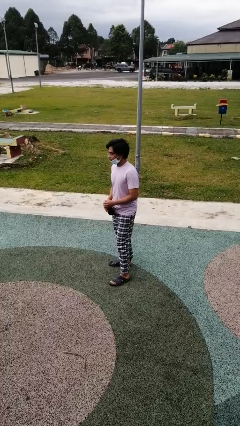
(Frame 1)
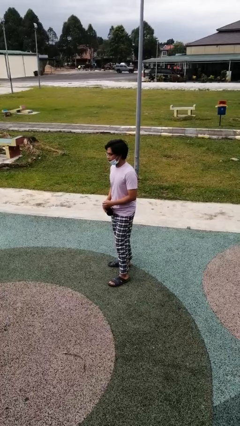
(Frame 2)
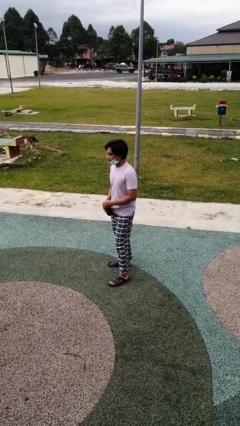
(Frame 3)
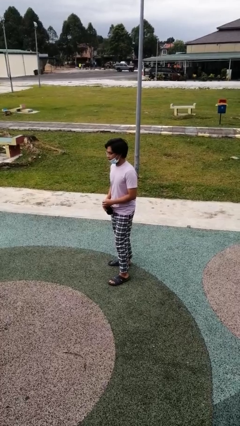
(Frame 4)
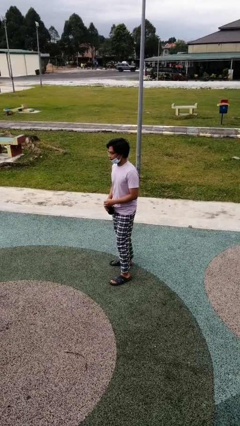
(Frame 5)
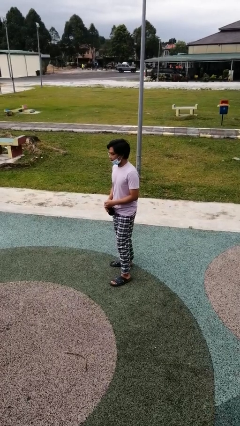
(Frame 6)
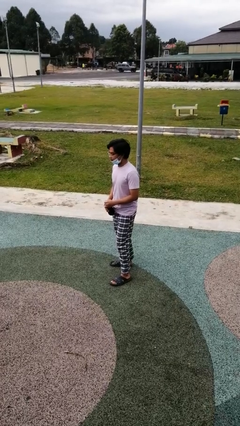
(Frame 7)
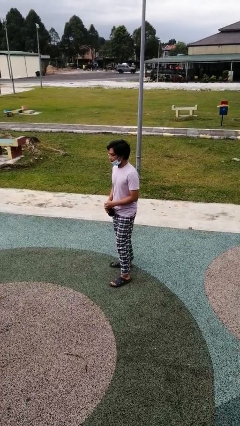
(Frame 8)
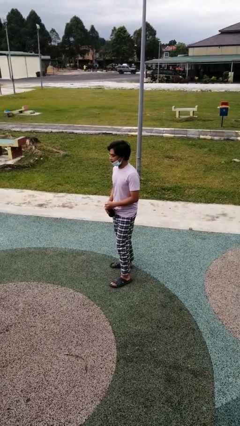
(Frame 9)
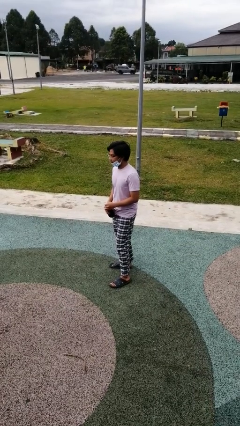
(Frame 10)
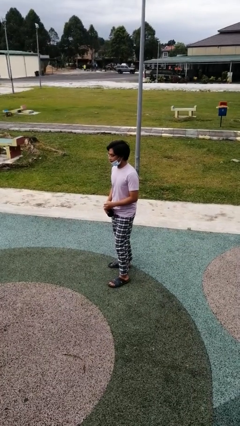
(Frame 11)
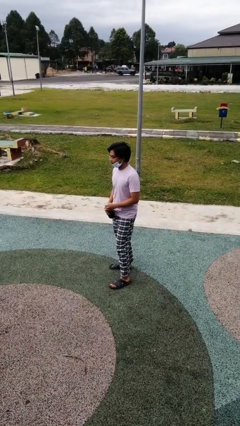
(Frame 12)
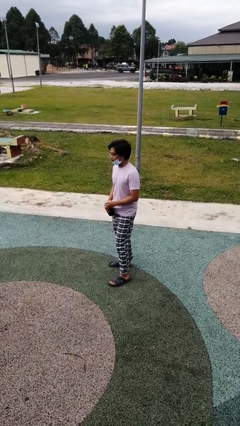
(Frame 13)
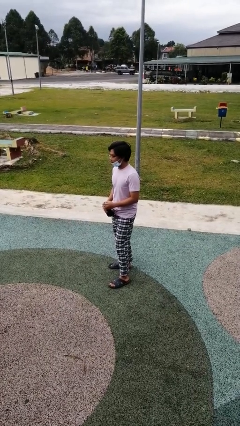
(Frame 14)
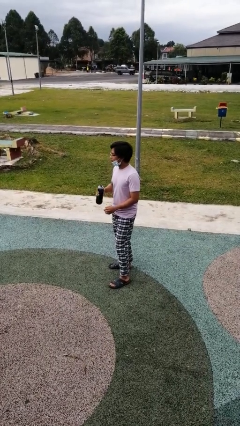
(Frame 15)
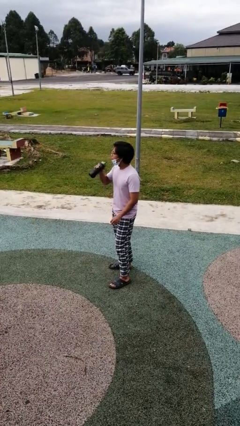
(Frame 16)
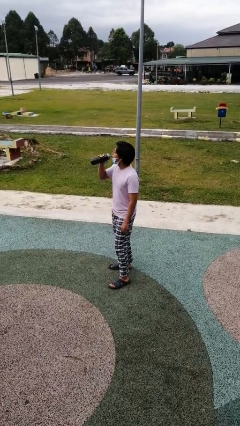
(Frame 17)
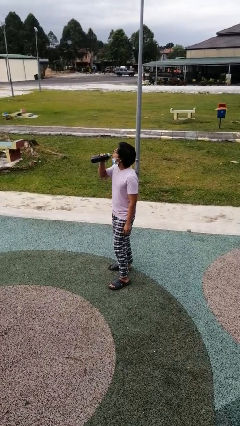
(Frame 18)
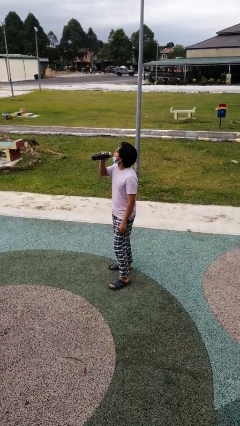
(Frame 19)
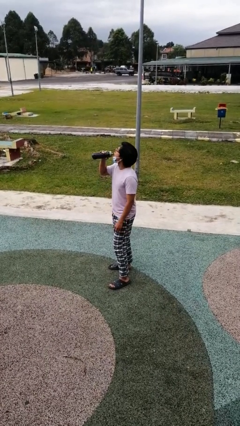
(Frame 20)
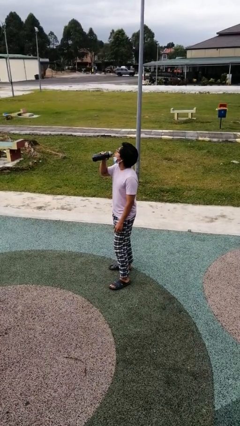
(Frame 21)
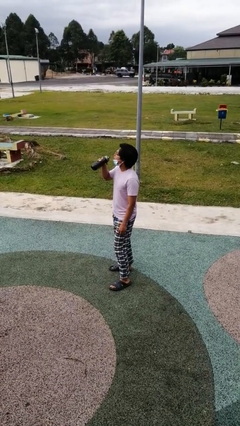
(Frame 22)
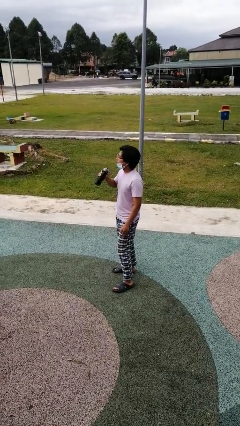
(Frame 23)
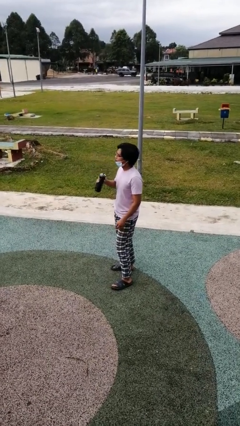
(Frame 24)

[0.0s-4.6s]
person drinks from bottle

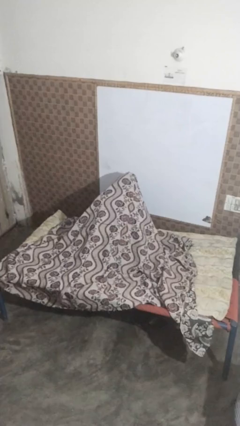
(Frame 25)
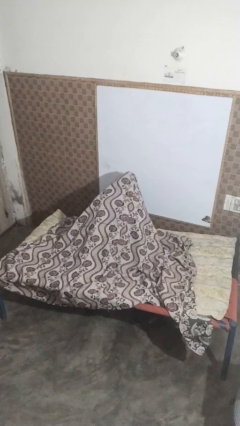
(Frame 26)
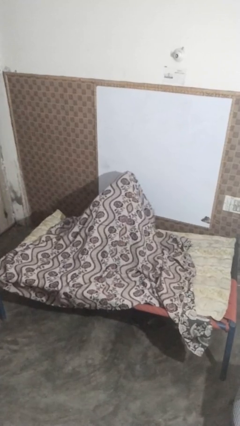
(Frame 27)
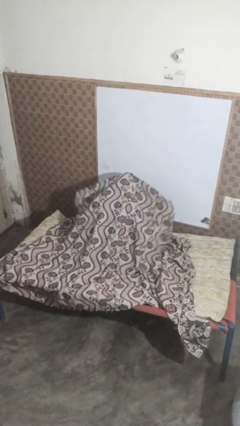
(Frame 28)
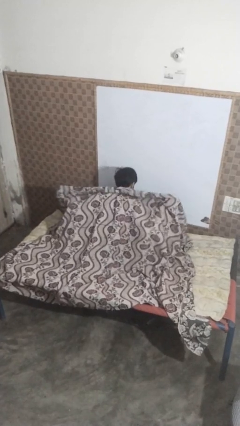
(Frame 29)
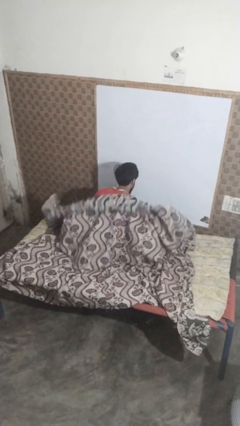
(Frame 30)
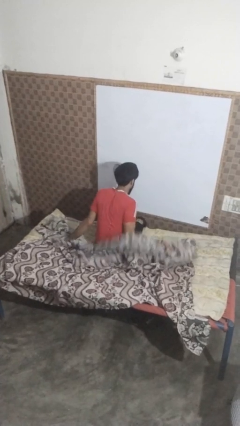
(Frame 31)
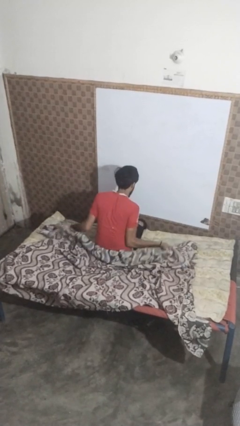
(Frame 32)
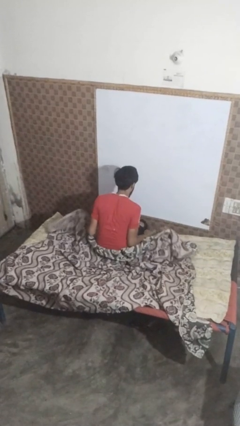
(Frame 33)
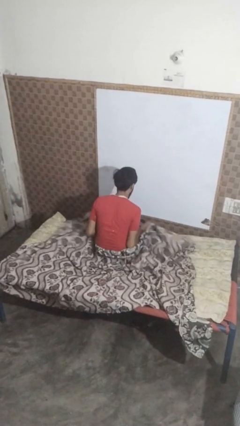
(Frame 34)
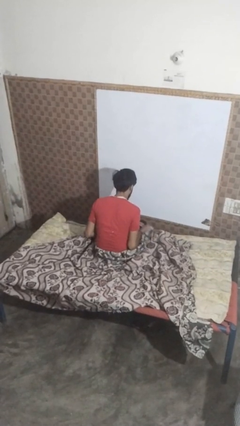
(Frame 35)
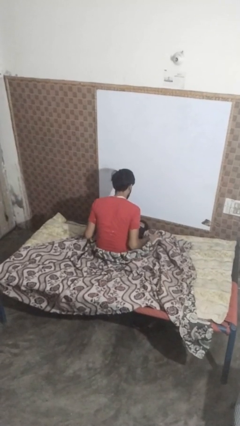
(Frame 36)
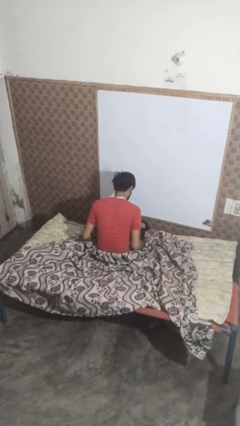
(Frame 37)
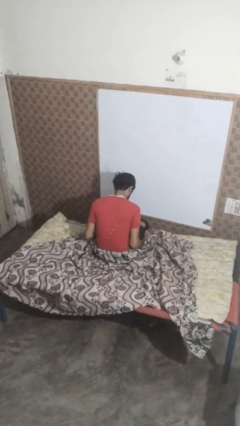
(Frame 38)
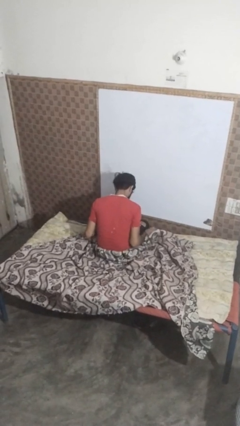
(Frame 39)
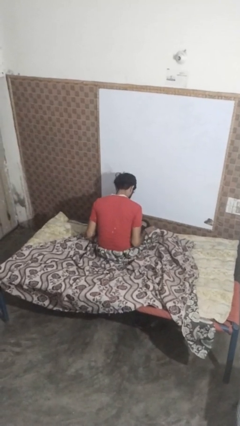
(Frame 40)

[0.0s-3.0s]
person uncovers with blanket

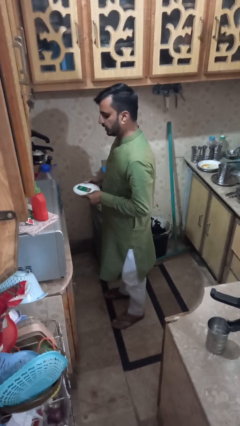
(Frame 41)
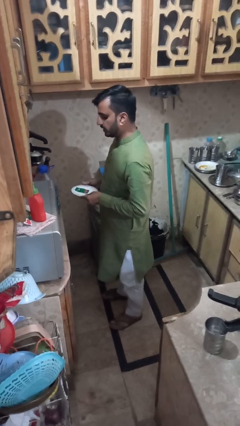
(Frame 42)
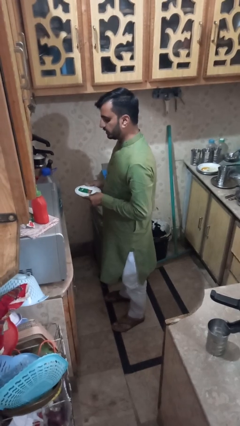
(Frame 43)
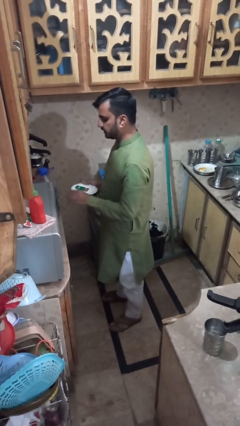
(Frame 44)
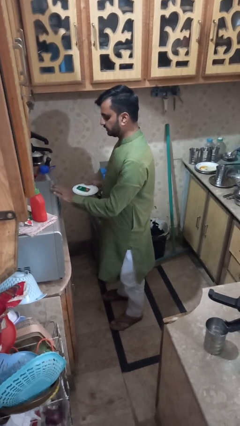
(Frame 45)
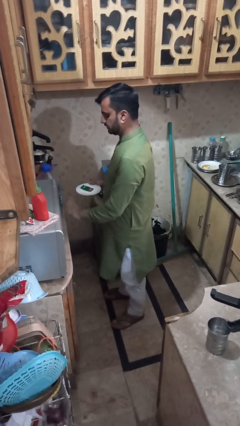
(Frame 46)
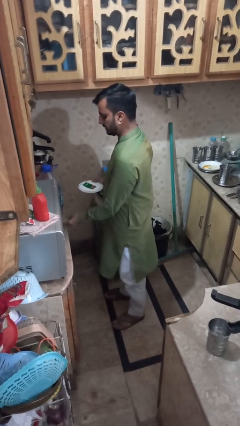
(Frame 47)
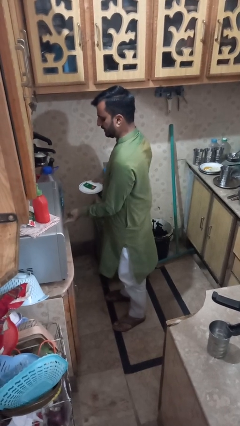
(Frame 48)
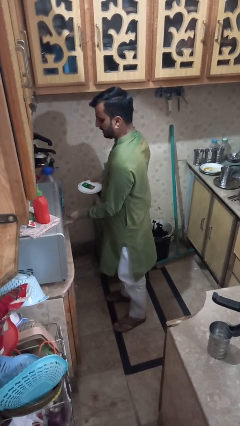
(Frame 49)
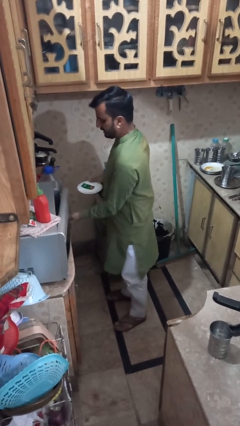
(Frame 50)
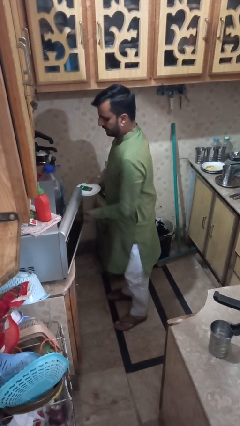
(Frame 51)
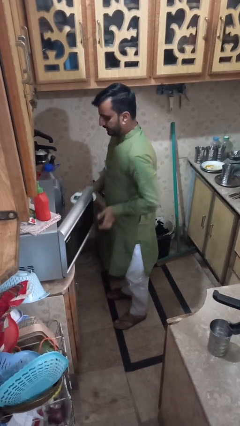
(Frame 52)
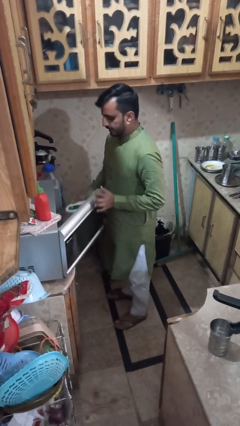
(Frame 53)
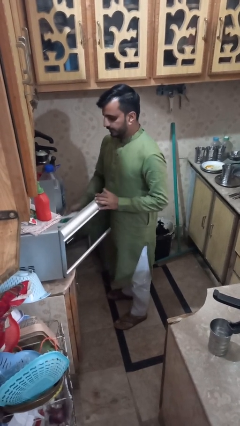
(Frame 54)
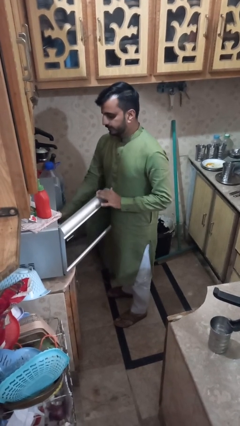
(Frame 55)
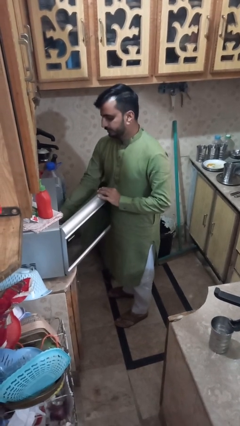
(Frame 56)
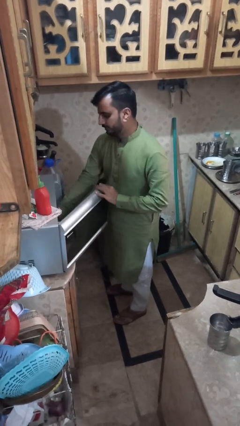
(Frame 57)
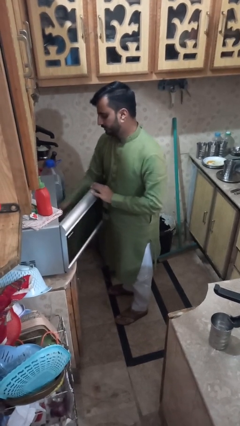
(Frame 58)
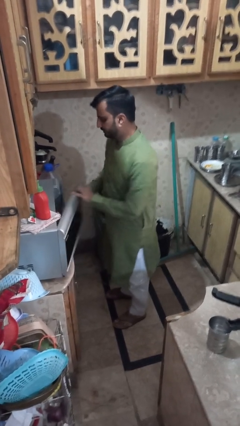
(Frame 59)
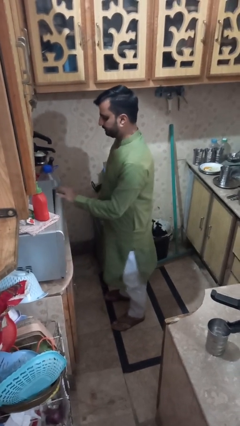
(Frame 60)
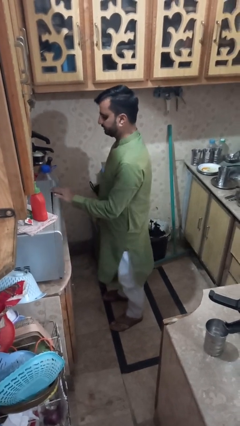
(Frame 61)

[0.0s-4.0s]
person puts object into microwave

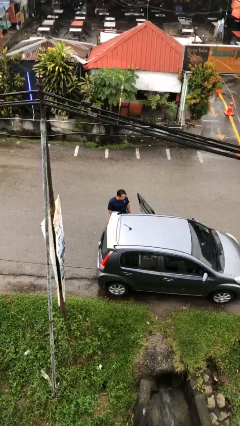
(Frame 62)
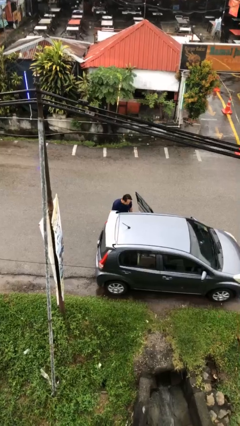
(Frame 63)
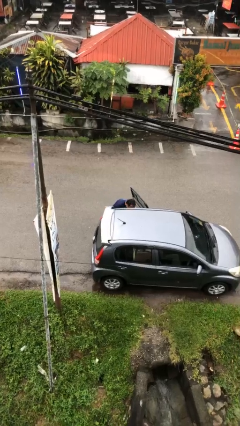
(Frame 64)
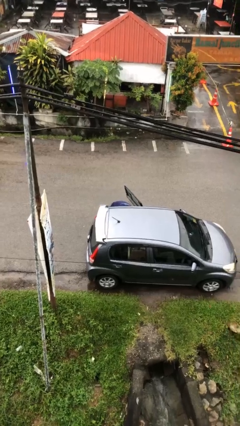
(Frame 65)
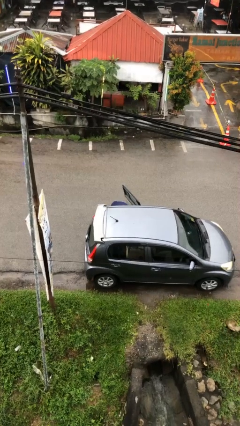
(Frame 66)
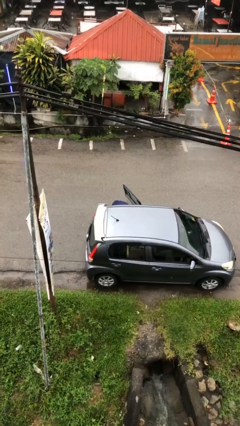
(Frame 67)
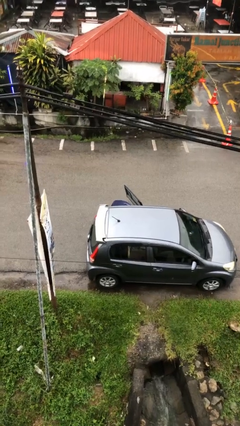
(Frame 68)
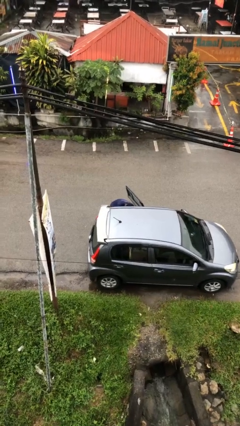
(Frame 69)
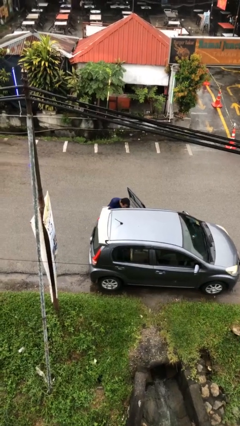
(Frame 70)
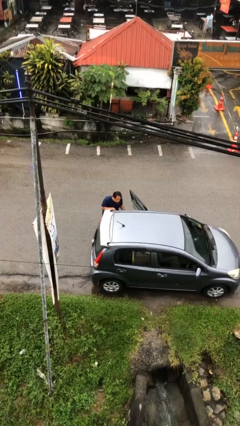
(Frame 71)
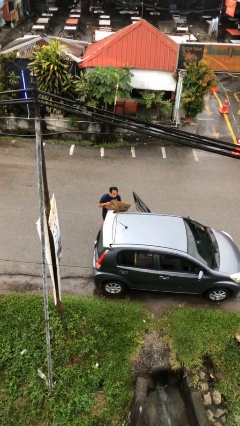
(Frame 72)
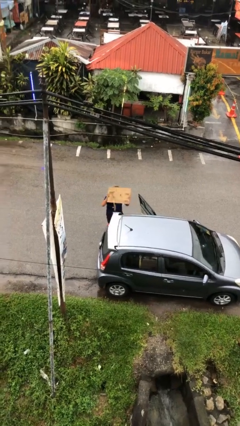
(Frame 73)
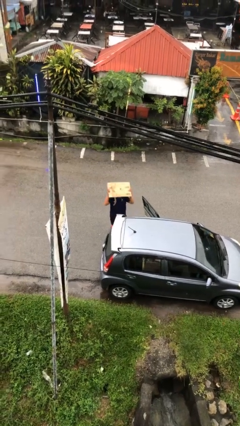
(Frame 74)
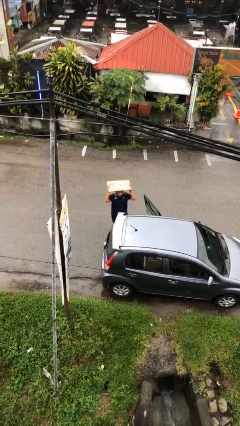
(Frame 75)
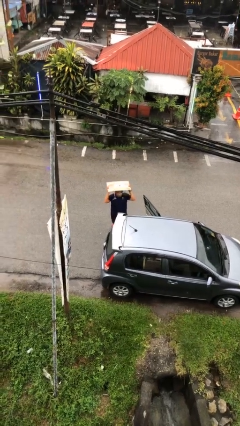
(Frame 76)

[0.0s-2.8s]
person unloads car

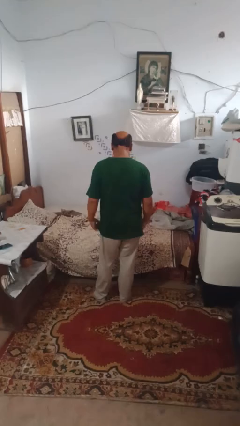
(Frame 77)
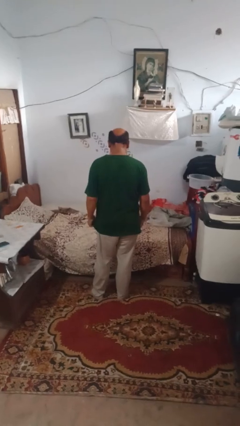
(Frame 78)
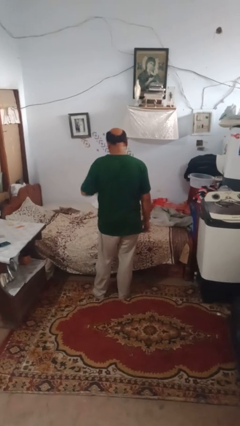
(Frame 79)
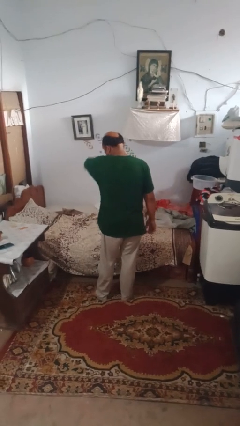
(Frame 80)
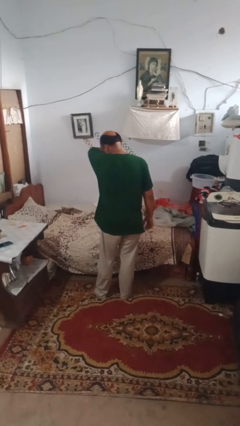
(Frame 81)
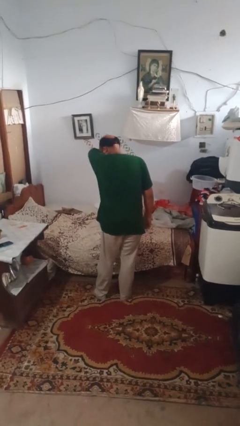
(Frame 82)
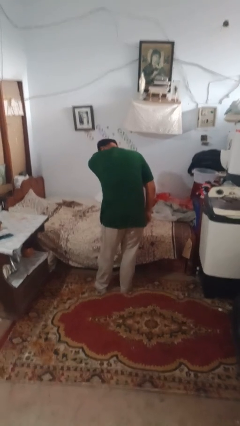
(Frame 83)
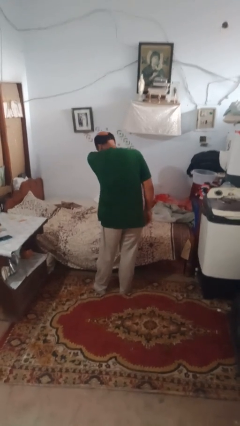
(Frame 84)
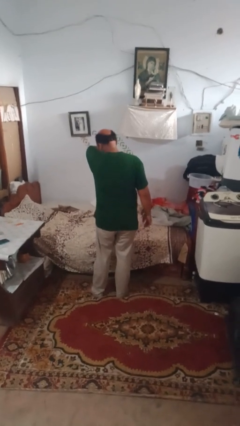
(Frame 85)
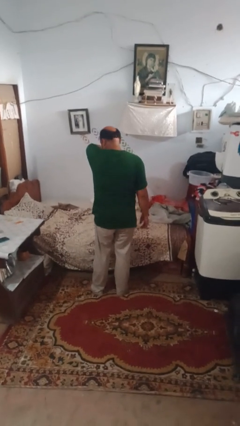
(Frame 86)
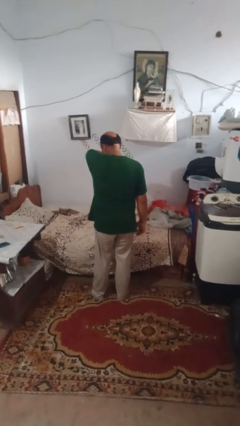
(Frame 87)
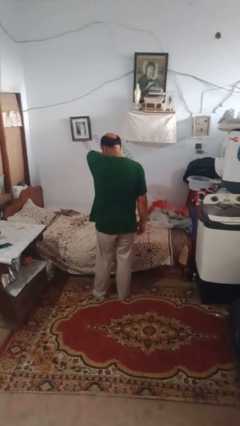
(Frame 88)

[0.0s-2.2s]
person sneezes into arm

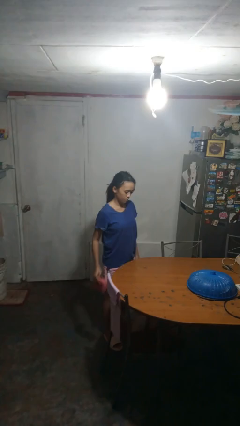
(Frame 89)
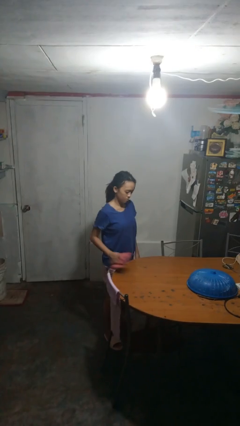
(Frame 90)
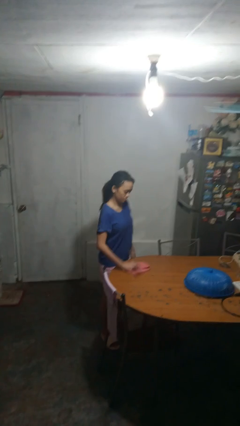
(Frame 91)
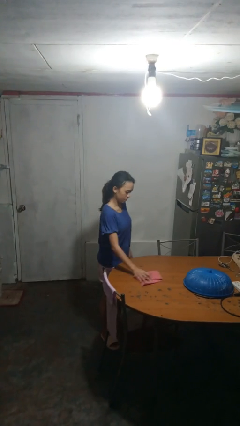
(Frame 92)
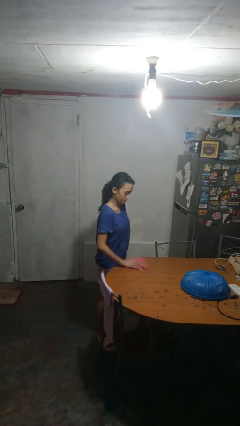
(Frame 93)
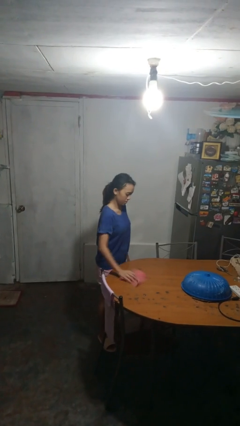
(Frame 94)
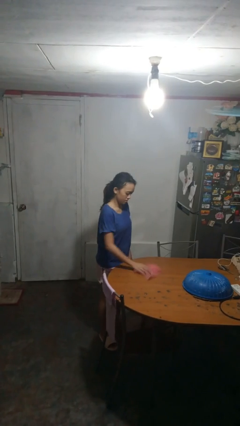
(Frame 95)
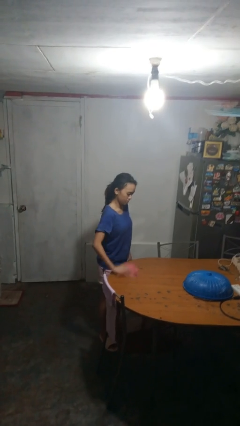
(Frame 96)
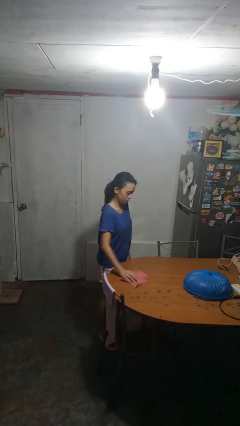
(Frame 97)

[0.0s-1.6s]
person cleans table with rag
